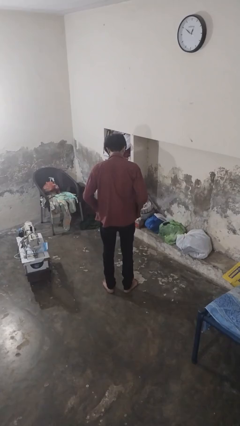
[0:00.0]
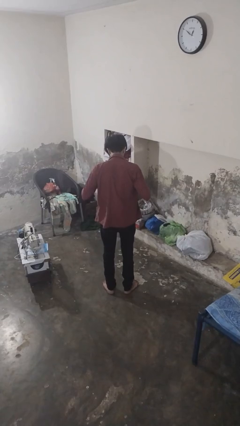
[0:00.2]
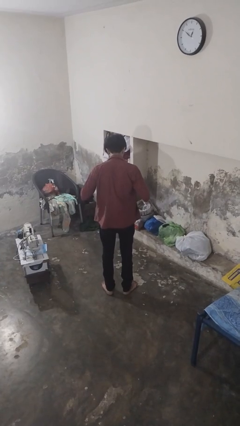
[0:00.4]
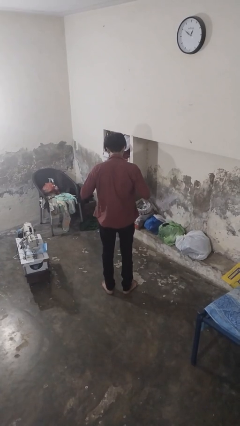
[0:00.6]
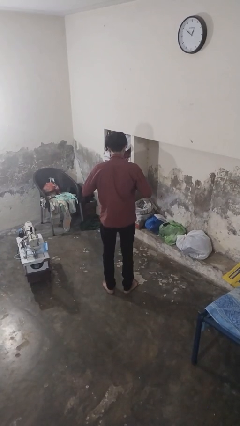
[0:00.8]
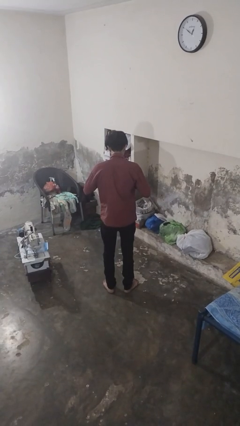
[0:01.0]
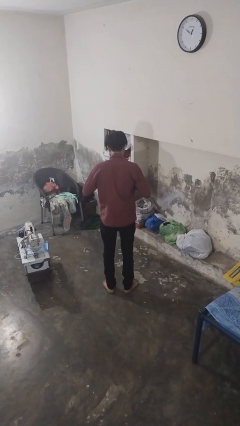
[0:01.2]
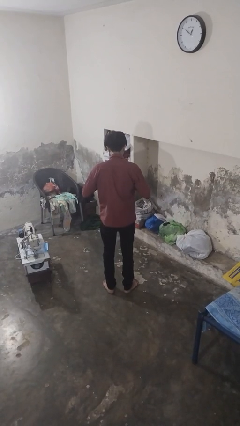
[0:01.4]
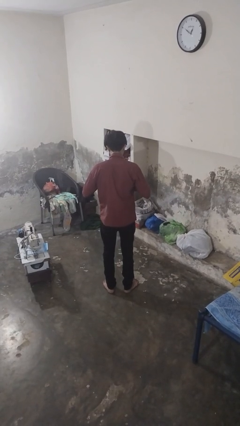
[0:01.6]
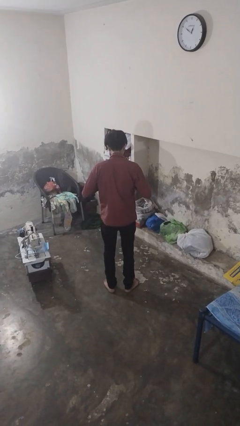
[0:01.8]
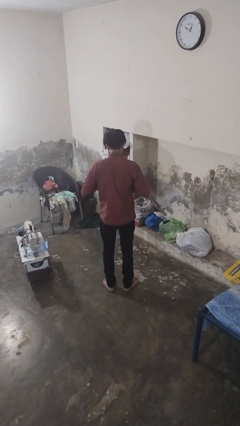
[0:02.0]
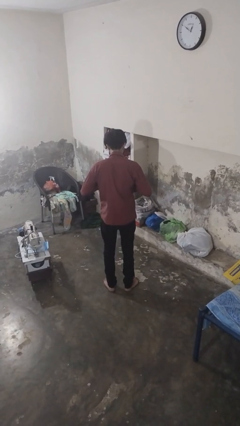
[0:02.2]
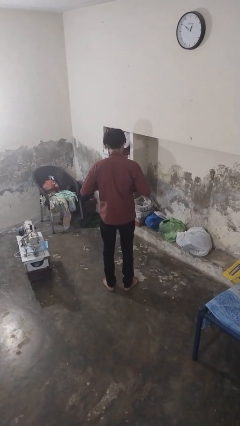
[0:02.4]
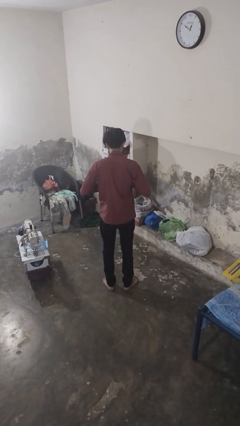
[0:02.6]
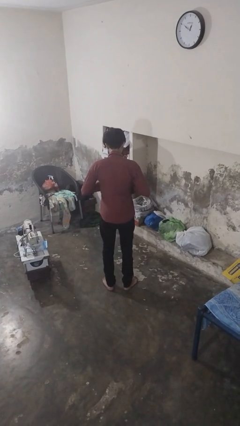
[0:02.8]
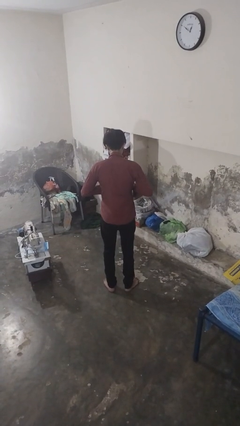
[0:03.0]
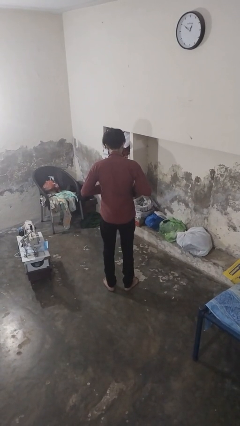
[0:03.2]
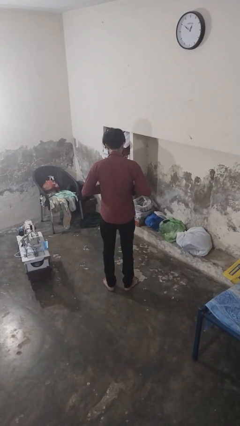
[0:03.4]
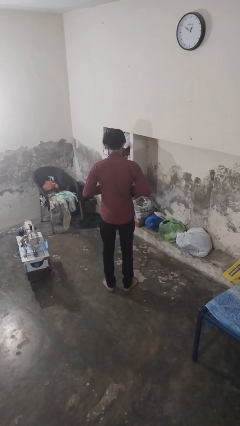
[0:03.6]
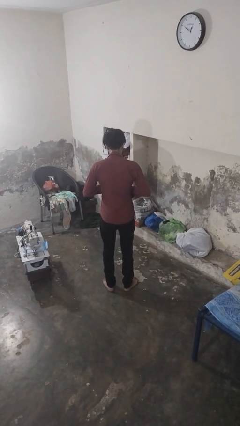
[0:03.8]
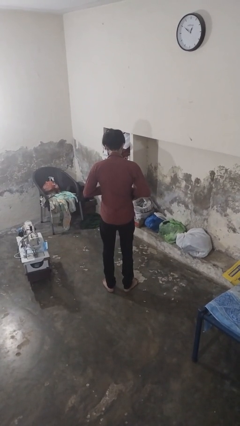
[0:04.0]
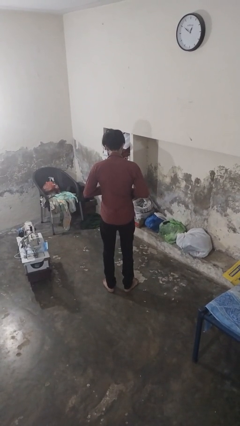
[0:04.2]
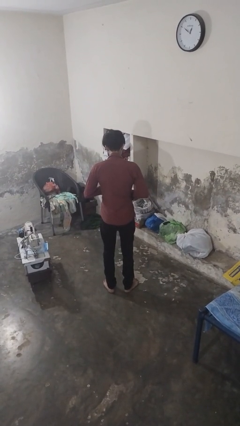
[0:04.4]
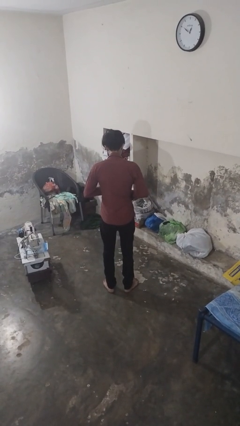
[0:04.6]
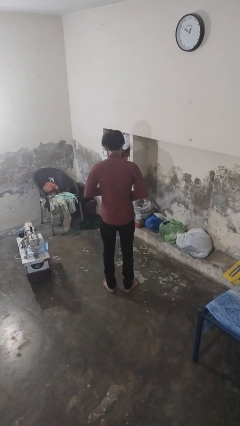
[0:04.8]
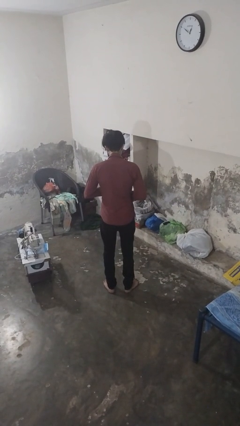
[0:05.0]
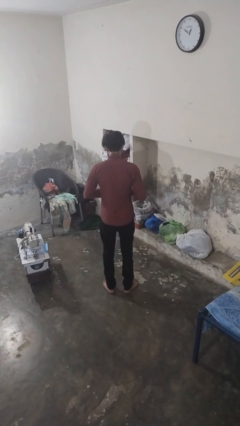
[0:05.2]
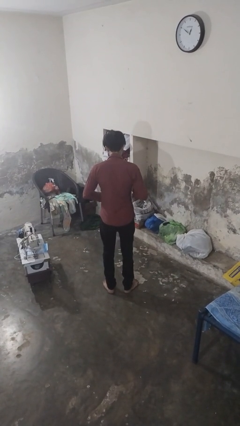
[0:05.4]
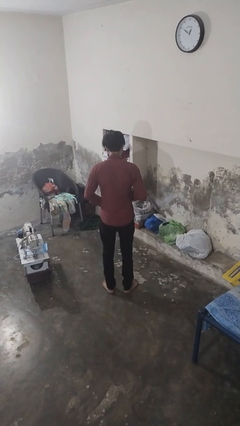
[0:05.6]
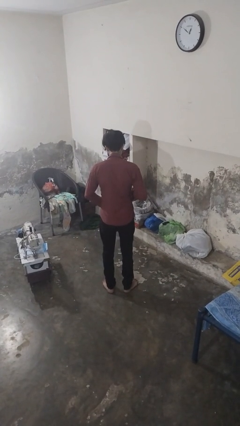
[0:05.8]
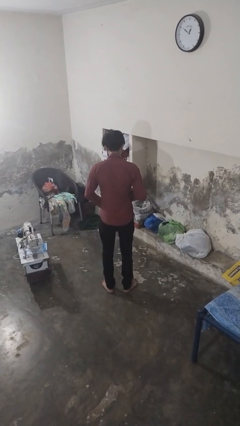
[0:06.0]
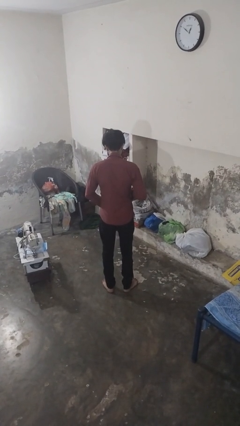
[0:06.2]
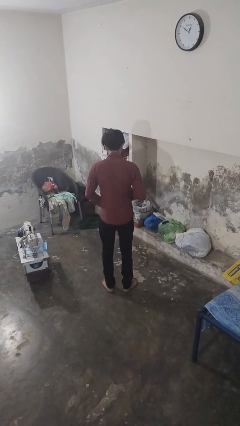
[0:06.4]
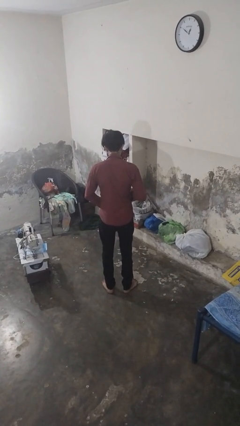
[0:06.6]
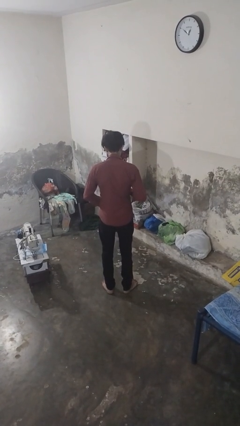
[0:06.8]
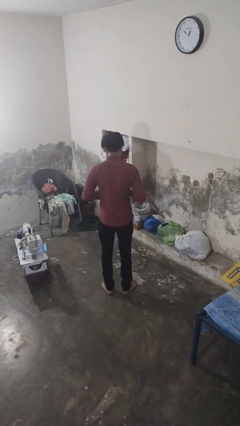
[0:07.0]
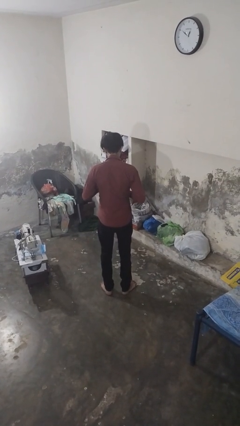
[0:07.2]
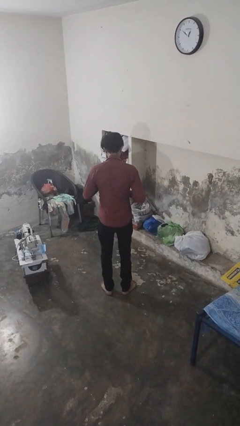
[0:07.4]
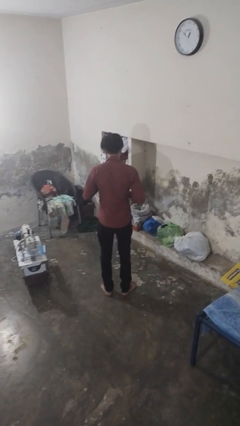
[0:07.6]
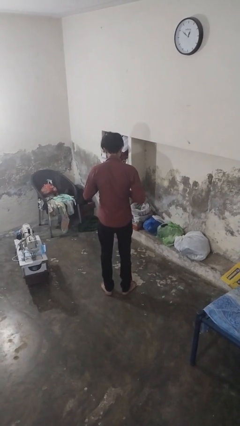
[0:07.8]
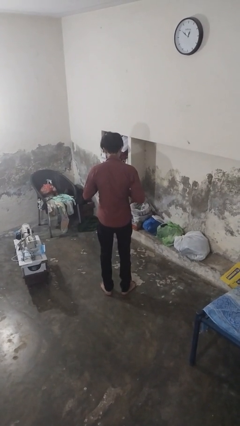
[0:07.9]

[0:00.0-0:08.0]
person buttons shirt

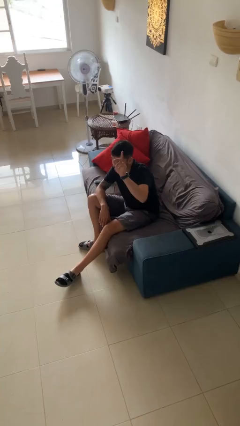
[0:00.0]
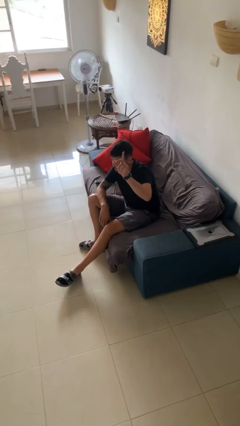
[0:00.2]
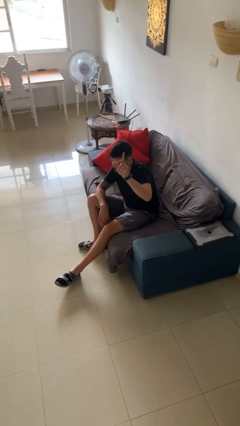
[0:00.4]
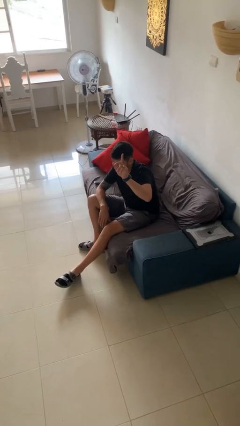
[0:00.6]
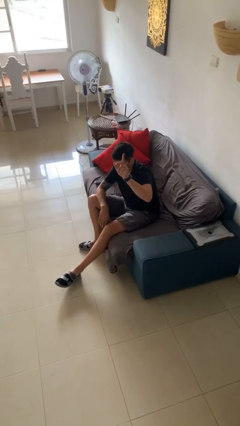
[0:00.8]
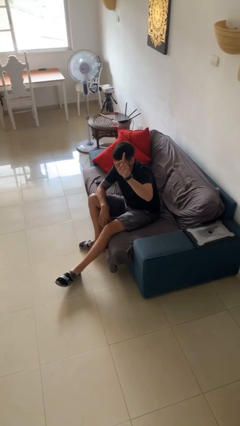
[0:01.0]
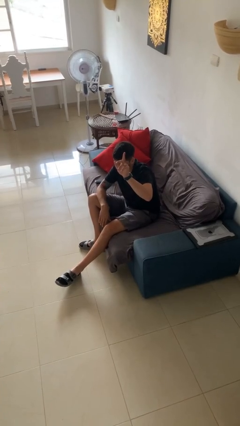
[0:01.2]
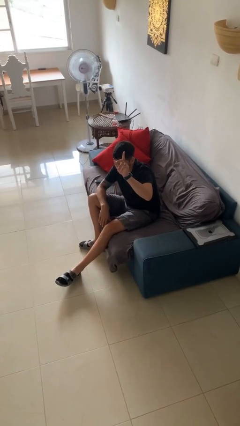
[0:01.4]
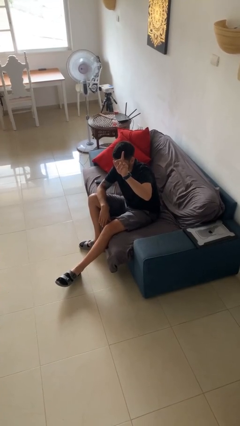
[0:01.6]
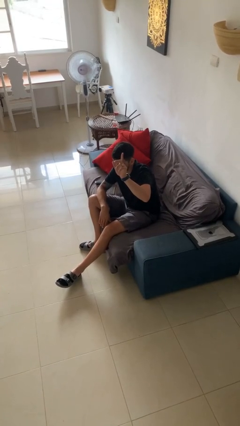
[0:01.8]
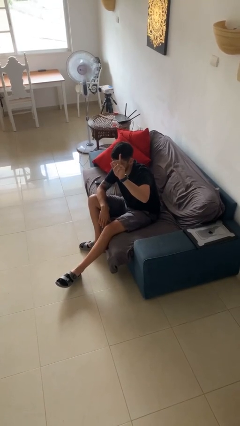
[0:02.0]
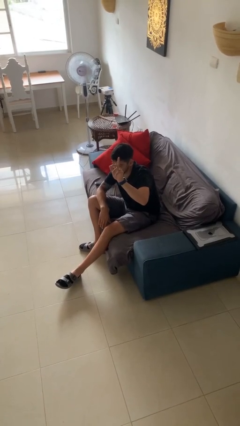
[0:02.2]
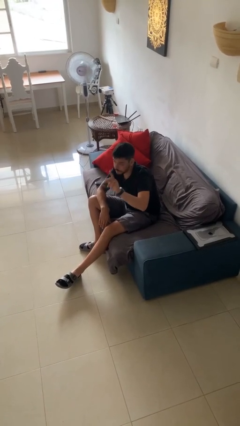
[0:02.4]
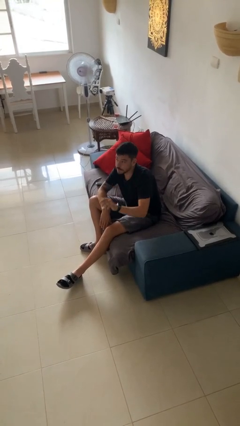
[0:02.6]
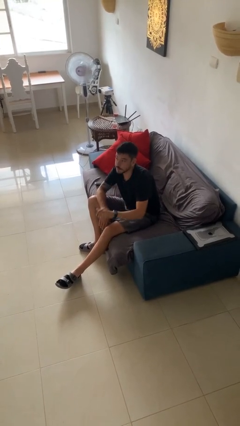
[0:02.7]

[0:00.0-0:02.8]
person gestures raise hand

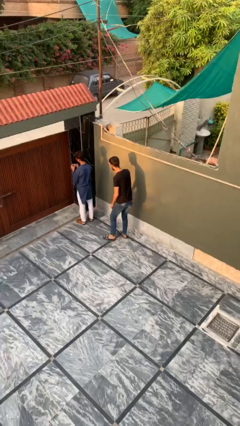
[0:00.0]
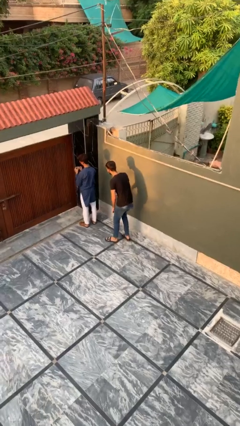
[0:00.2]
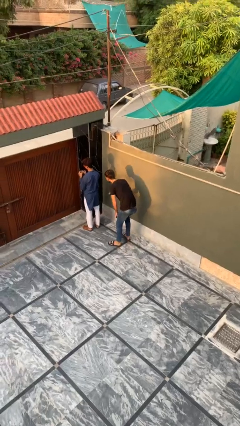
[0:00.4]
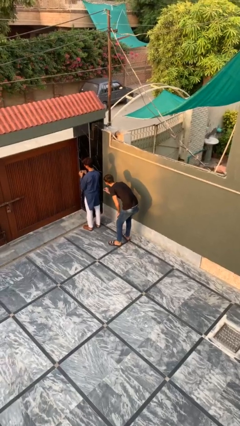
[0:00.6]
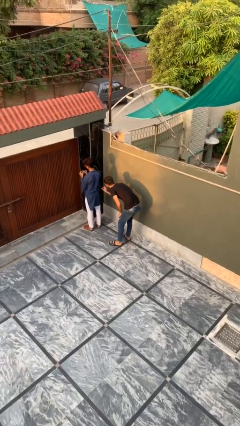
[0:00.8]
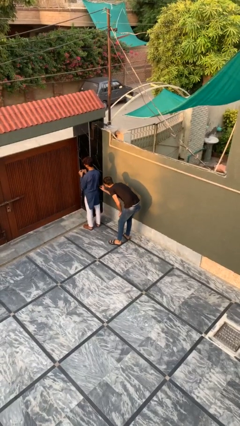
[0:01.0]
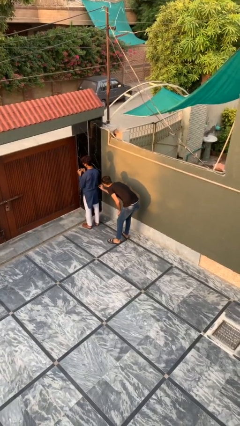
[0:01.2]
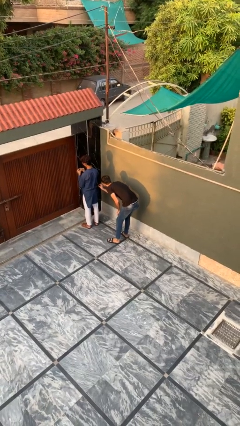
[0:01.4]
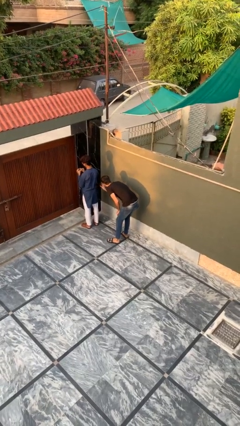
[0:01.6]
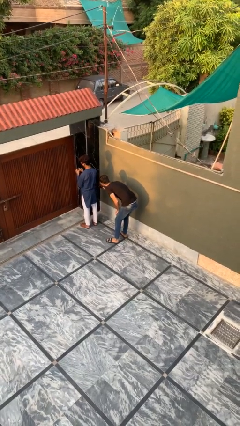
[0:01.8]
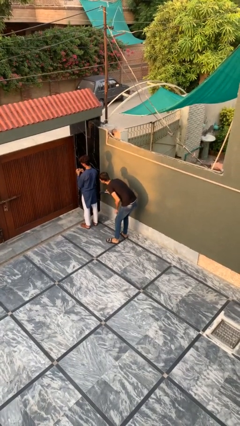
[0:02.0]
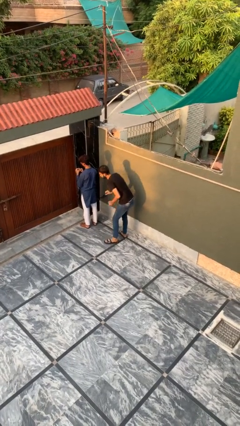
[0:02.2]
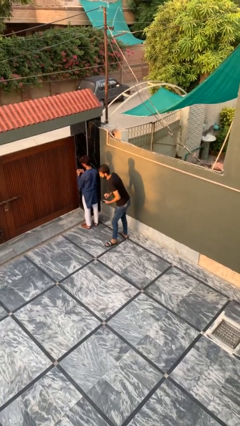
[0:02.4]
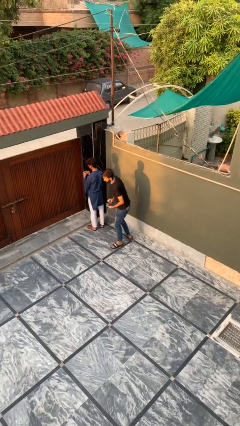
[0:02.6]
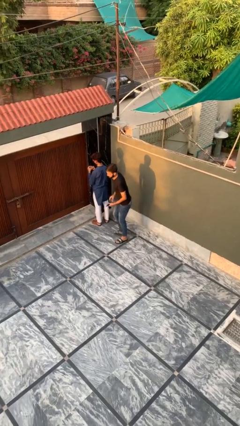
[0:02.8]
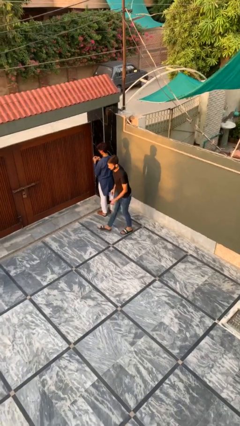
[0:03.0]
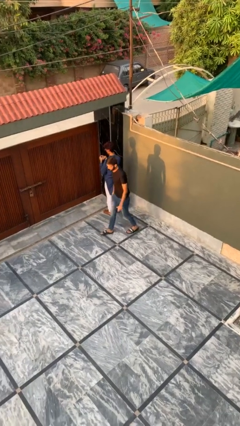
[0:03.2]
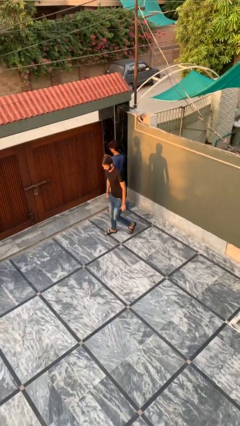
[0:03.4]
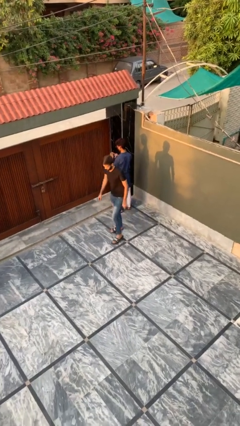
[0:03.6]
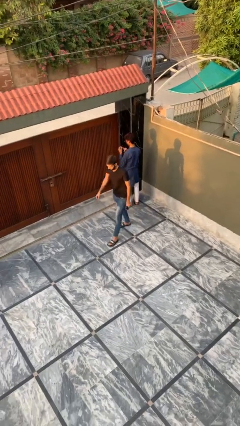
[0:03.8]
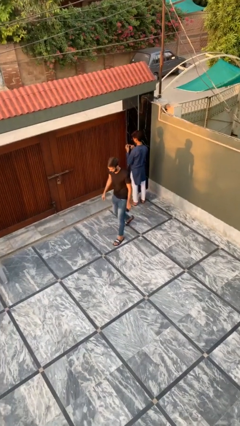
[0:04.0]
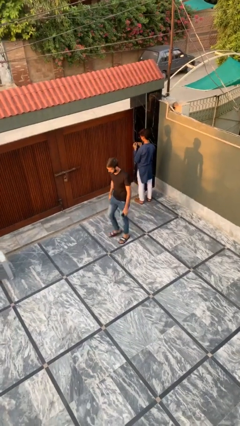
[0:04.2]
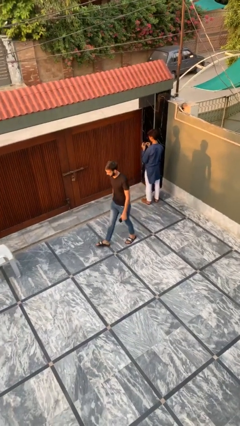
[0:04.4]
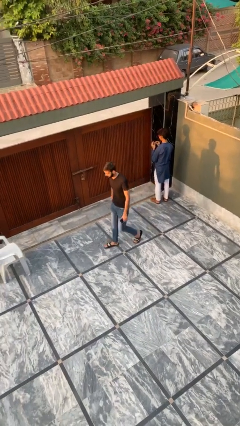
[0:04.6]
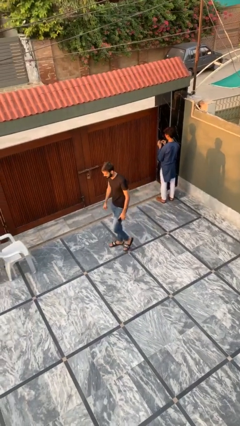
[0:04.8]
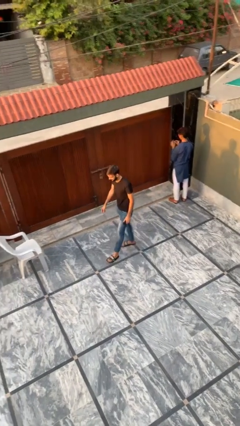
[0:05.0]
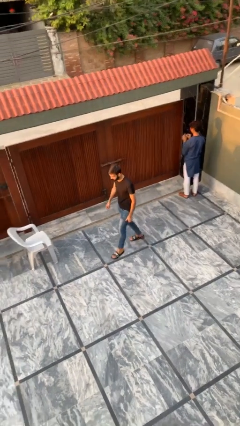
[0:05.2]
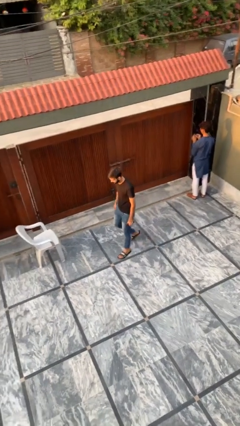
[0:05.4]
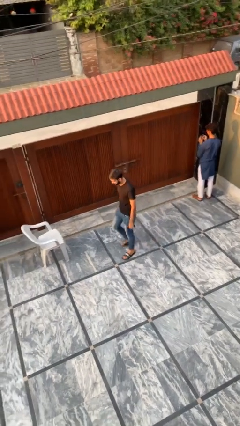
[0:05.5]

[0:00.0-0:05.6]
person steals object from person

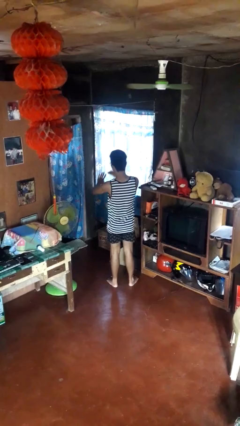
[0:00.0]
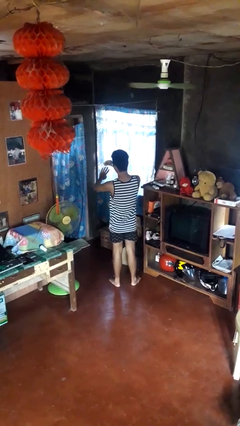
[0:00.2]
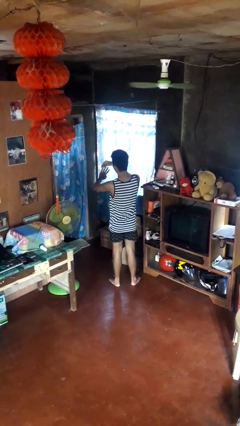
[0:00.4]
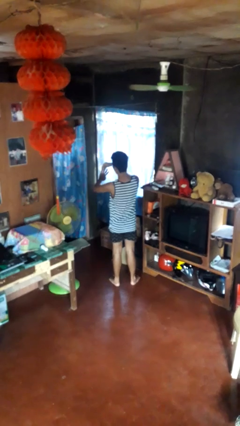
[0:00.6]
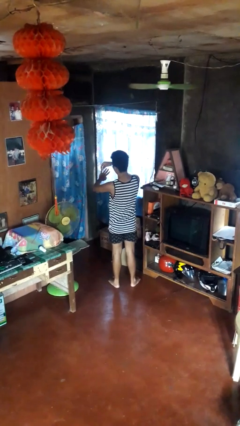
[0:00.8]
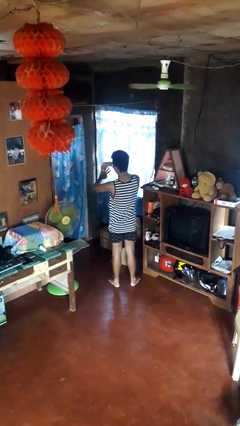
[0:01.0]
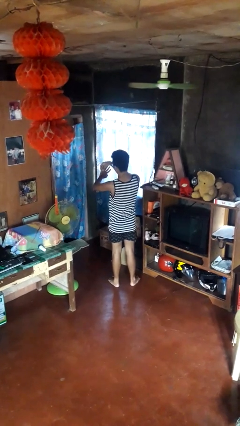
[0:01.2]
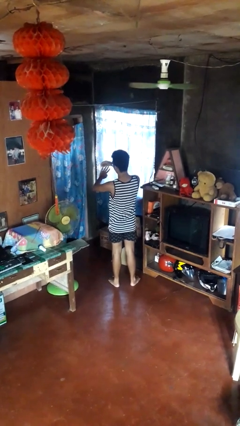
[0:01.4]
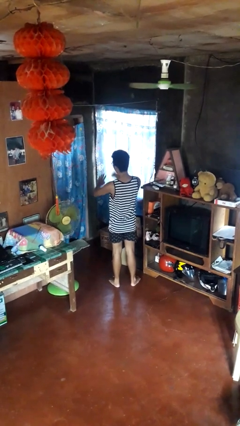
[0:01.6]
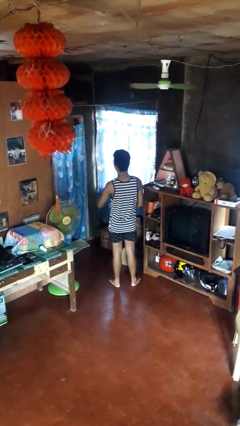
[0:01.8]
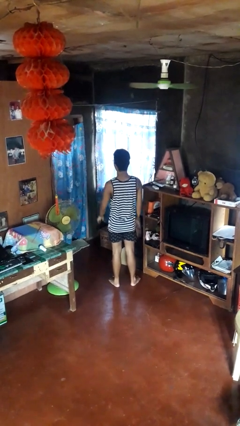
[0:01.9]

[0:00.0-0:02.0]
person puts on ring
